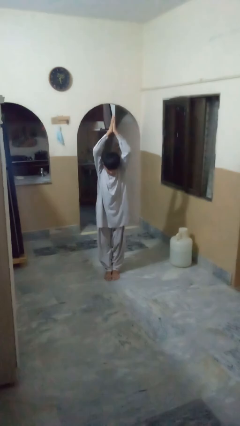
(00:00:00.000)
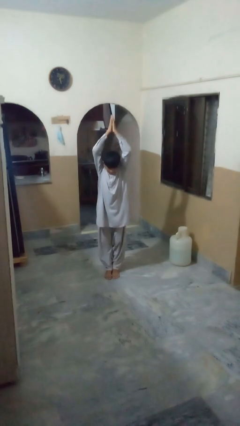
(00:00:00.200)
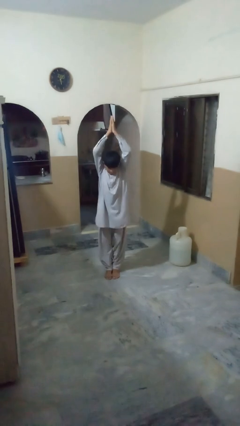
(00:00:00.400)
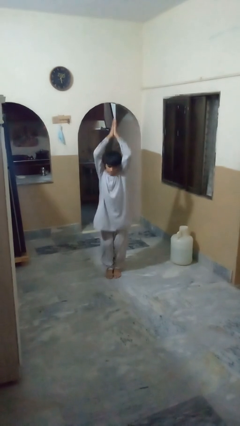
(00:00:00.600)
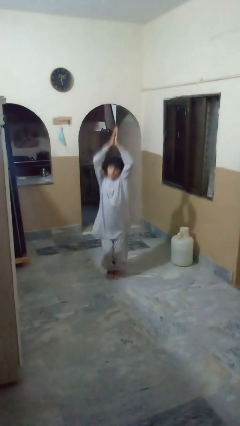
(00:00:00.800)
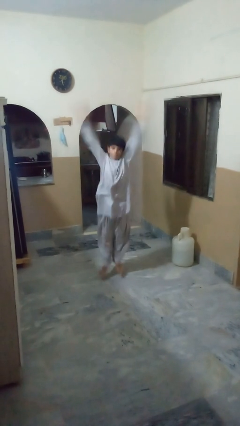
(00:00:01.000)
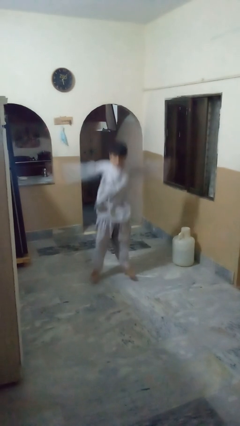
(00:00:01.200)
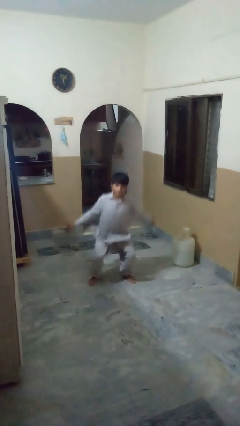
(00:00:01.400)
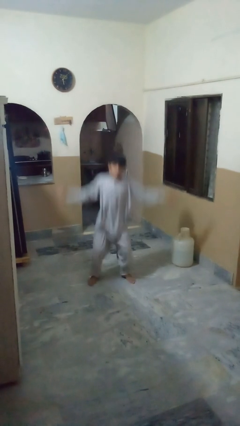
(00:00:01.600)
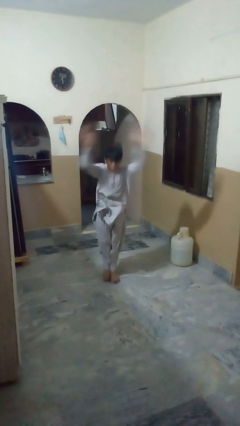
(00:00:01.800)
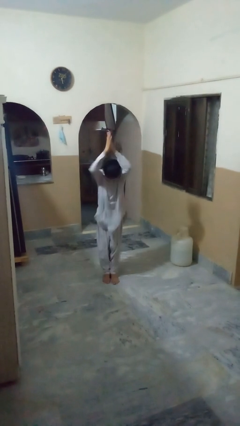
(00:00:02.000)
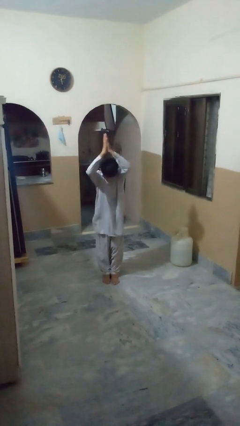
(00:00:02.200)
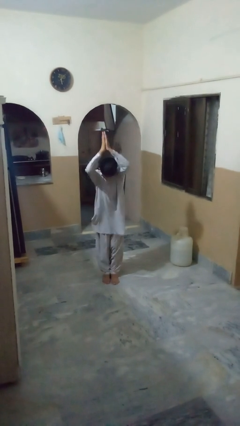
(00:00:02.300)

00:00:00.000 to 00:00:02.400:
person exercises with jumping jacks

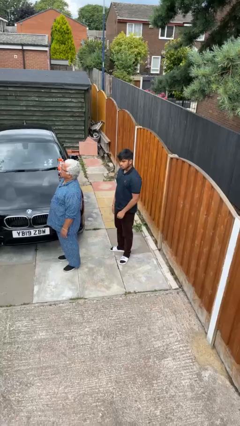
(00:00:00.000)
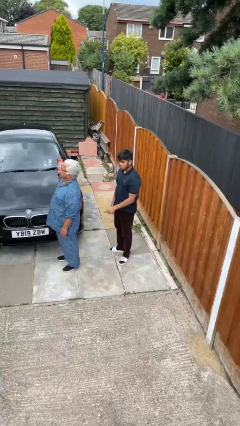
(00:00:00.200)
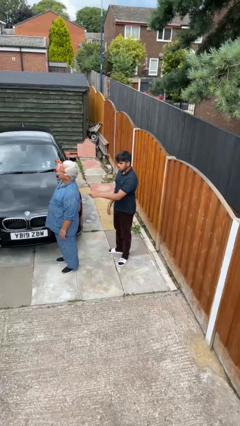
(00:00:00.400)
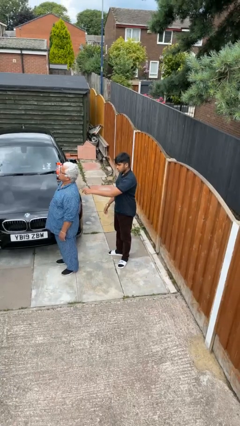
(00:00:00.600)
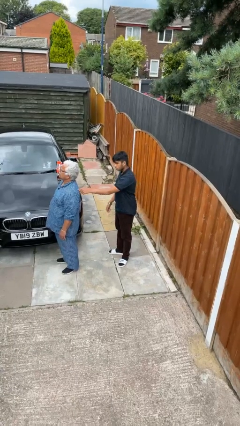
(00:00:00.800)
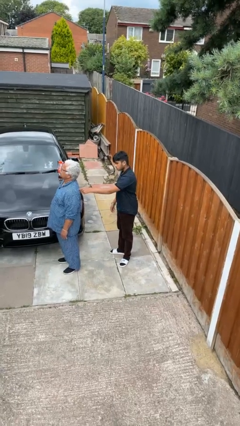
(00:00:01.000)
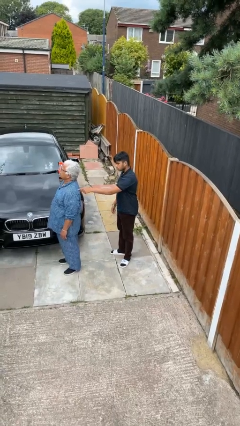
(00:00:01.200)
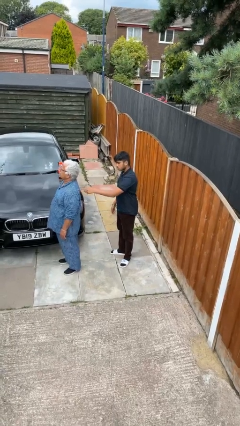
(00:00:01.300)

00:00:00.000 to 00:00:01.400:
person touches back of person

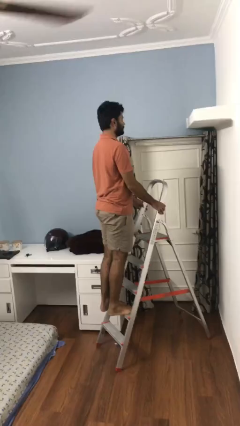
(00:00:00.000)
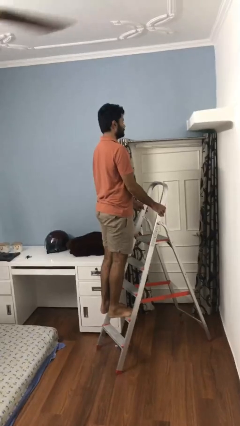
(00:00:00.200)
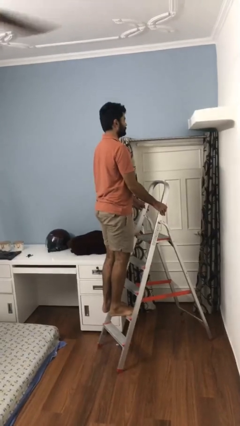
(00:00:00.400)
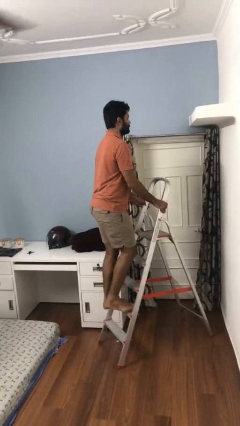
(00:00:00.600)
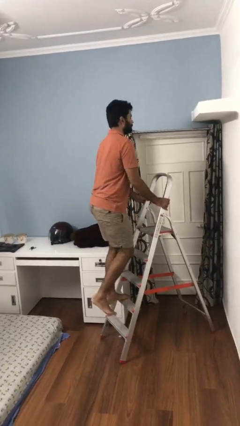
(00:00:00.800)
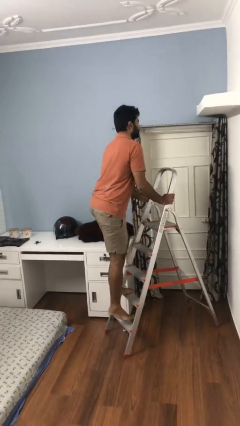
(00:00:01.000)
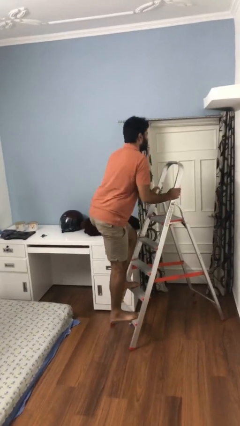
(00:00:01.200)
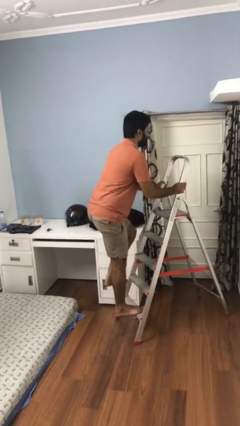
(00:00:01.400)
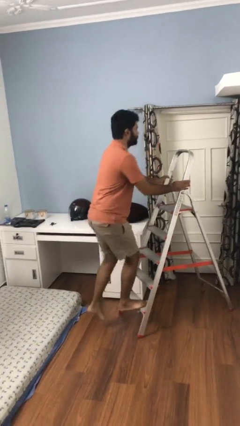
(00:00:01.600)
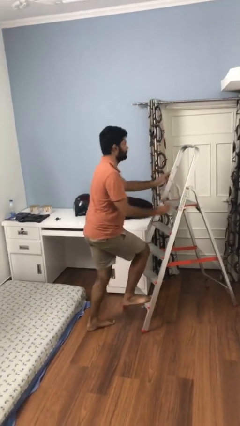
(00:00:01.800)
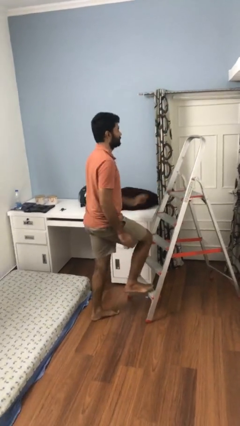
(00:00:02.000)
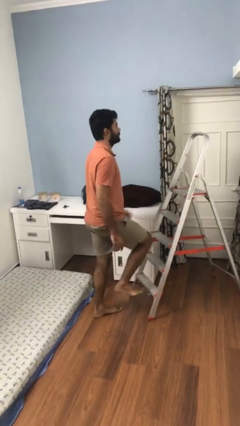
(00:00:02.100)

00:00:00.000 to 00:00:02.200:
person climbs down ladder

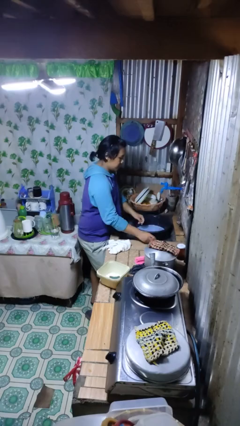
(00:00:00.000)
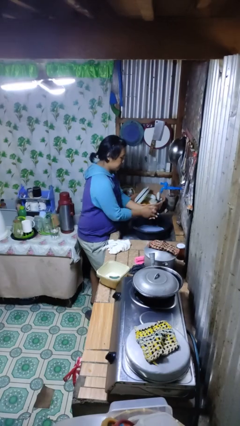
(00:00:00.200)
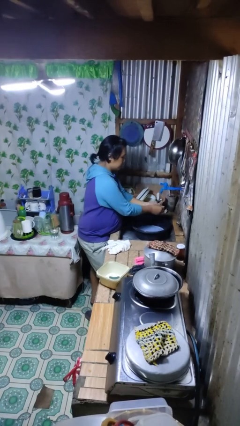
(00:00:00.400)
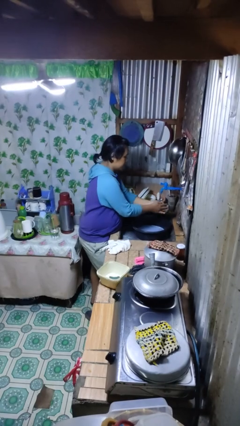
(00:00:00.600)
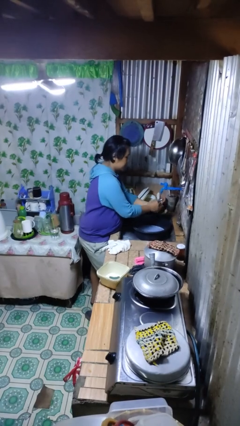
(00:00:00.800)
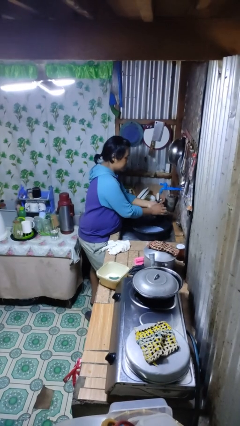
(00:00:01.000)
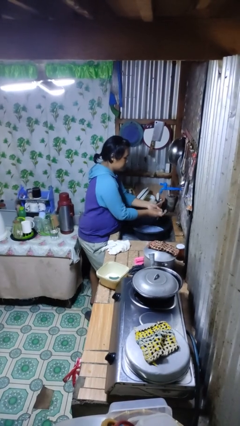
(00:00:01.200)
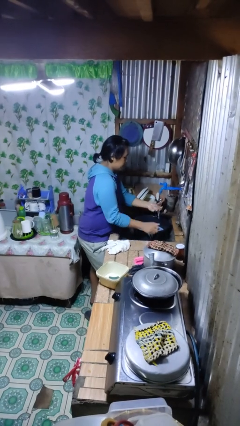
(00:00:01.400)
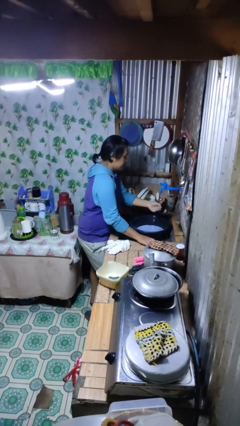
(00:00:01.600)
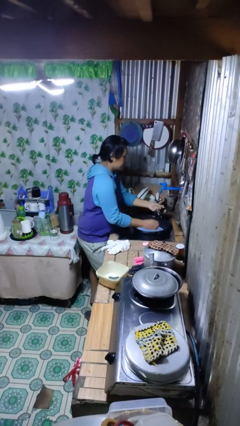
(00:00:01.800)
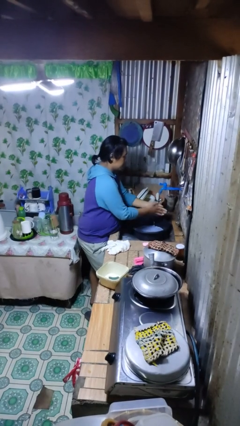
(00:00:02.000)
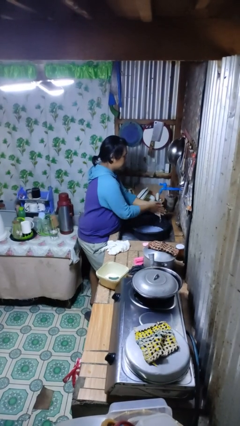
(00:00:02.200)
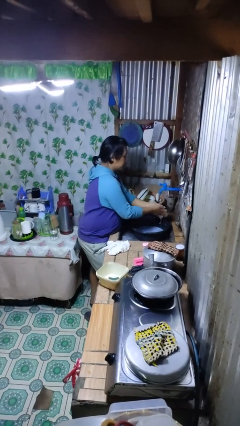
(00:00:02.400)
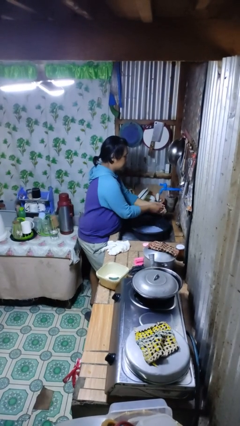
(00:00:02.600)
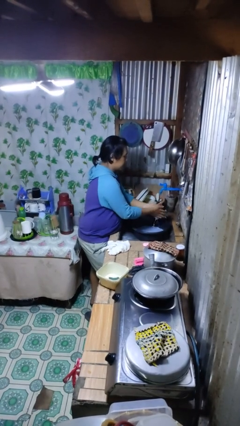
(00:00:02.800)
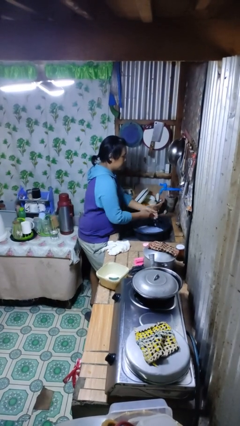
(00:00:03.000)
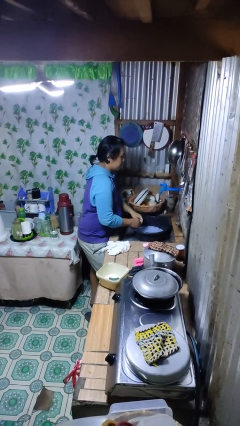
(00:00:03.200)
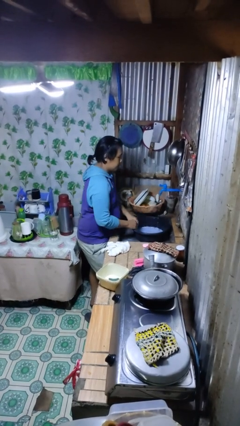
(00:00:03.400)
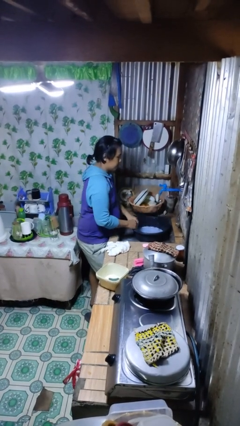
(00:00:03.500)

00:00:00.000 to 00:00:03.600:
person washes hands

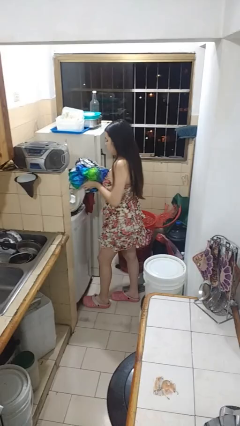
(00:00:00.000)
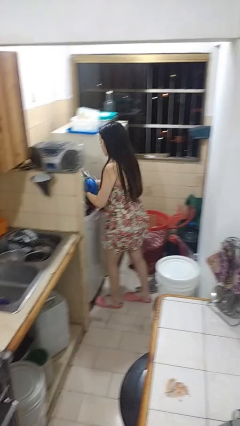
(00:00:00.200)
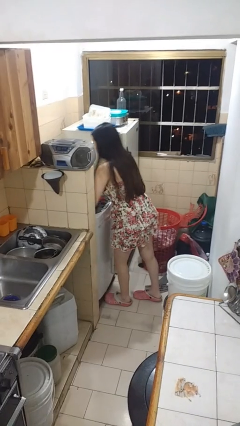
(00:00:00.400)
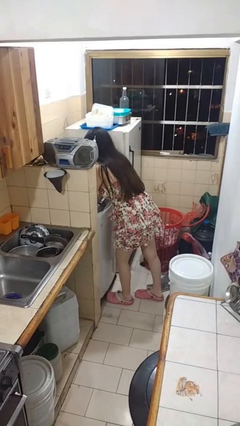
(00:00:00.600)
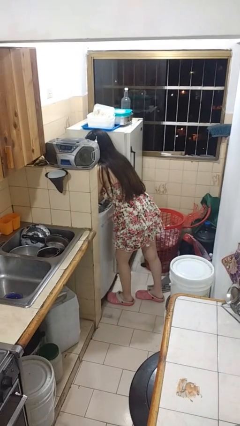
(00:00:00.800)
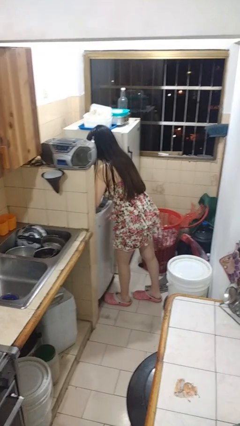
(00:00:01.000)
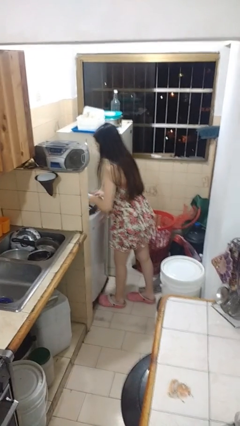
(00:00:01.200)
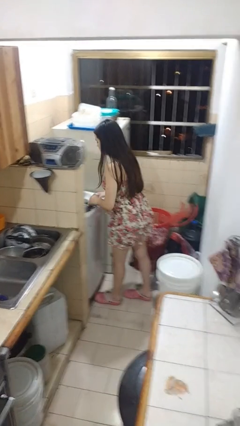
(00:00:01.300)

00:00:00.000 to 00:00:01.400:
person loads clotheswasher

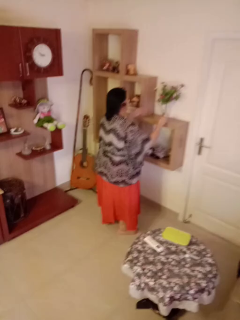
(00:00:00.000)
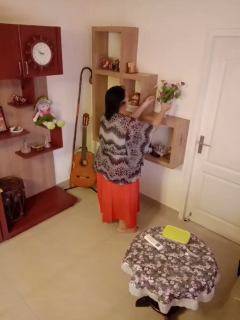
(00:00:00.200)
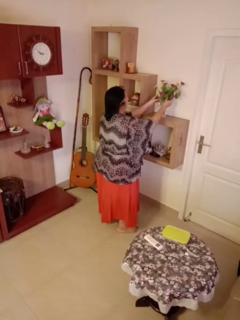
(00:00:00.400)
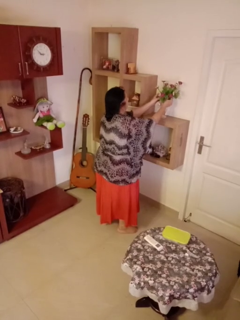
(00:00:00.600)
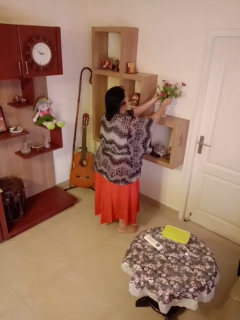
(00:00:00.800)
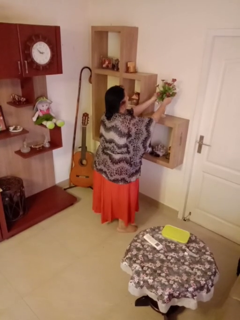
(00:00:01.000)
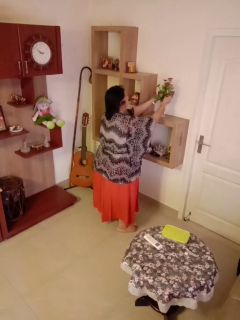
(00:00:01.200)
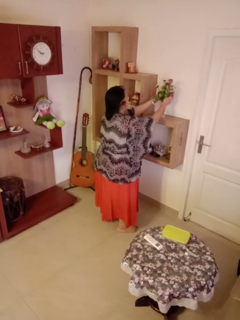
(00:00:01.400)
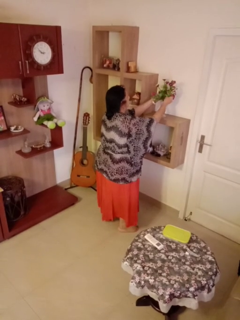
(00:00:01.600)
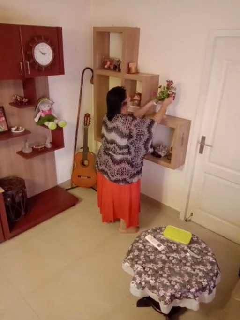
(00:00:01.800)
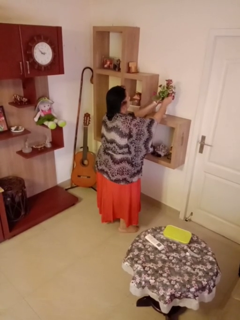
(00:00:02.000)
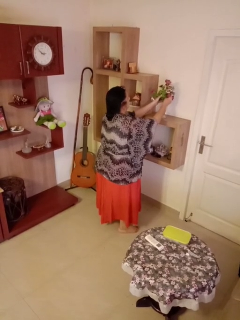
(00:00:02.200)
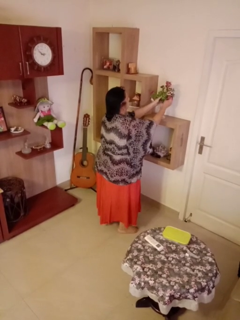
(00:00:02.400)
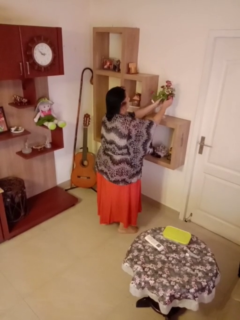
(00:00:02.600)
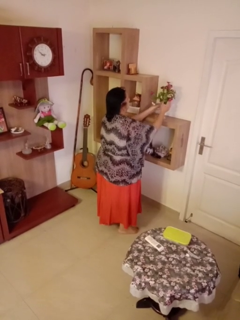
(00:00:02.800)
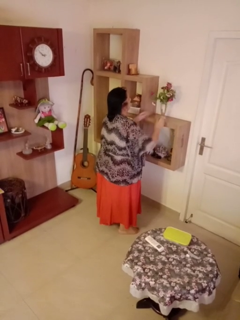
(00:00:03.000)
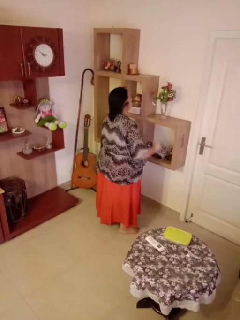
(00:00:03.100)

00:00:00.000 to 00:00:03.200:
person arranges flowers in vase

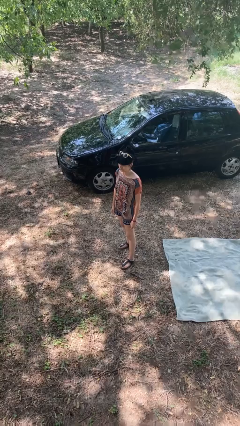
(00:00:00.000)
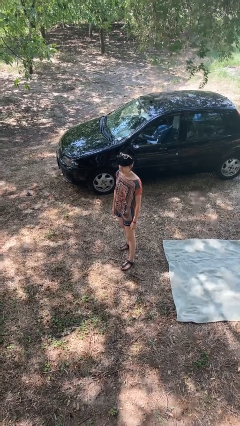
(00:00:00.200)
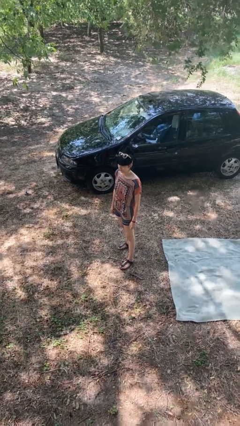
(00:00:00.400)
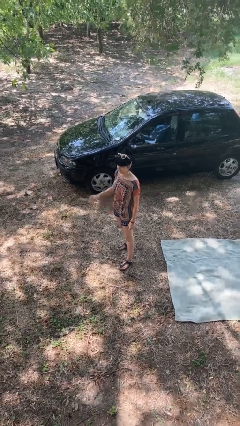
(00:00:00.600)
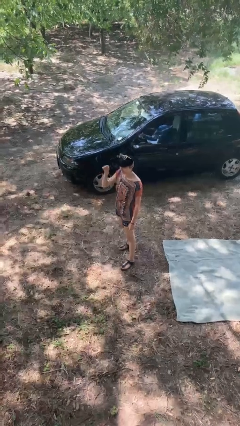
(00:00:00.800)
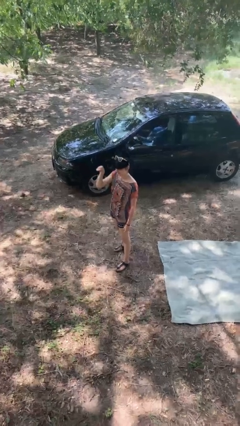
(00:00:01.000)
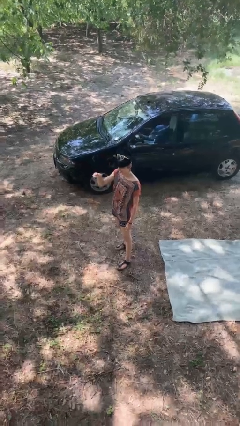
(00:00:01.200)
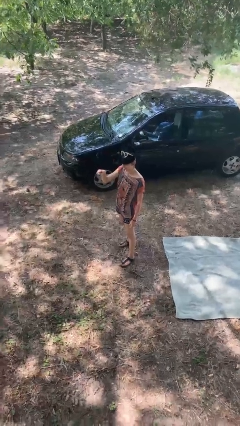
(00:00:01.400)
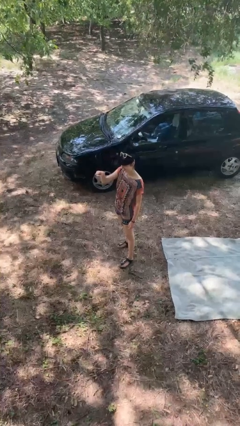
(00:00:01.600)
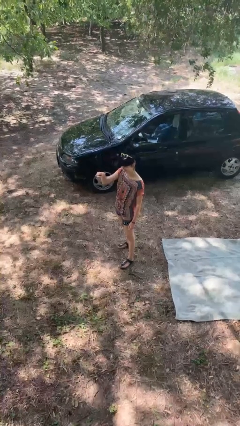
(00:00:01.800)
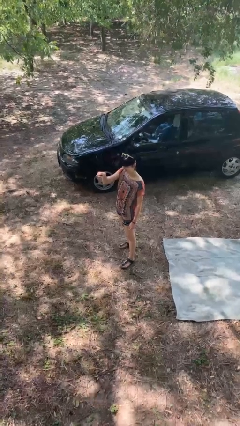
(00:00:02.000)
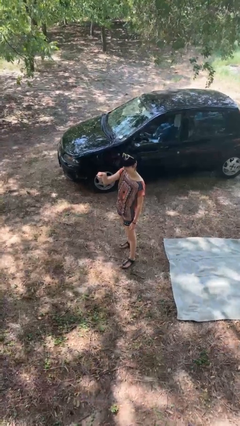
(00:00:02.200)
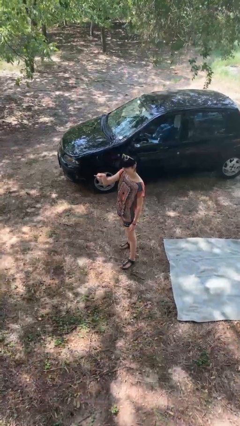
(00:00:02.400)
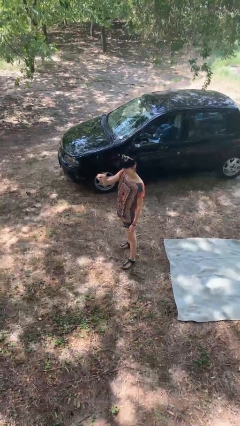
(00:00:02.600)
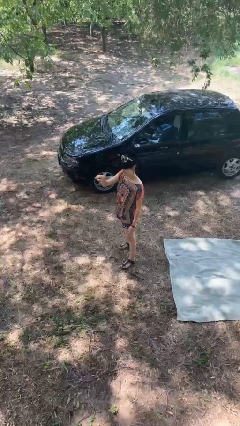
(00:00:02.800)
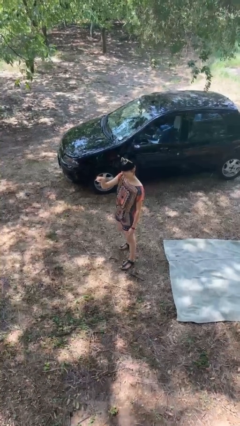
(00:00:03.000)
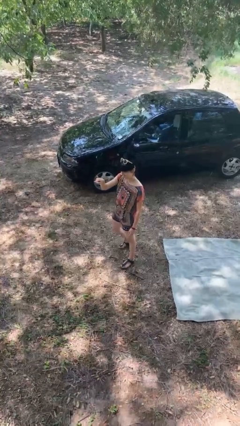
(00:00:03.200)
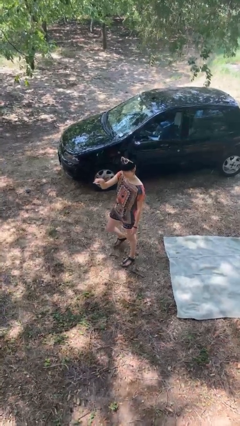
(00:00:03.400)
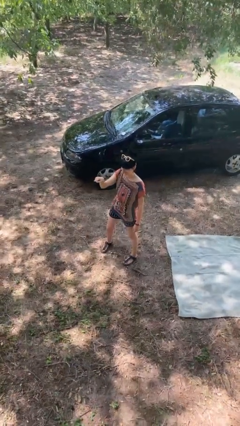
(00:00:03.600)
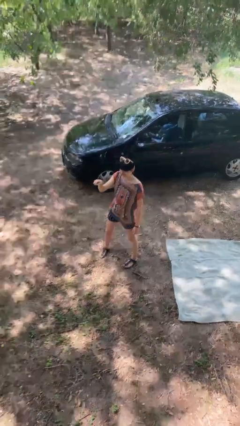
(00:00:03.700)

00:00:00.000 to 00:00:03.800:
person points at person
